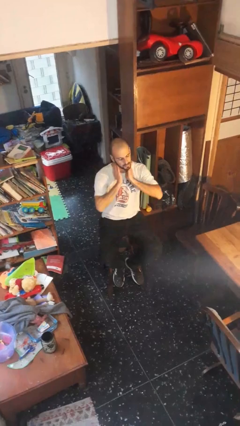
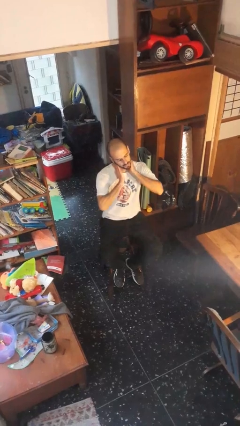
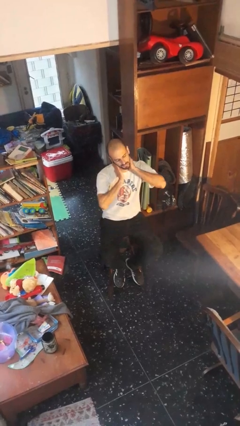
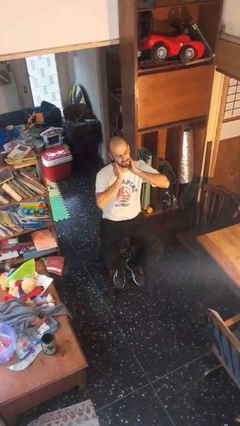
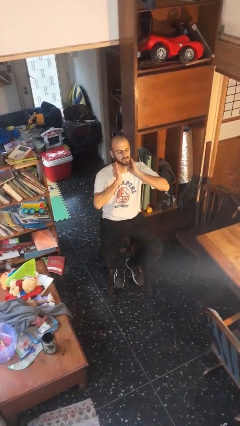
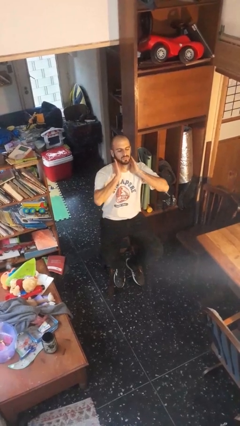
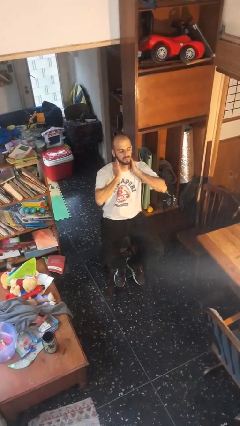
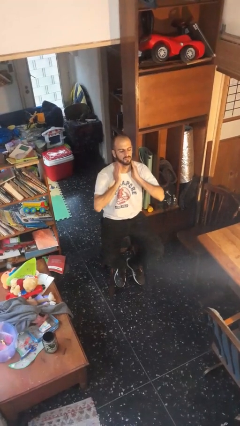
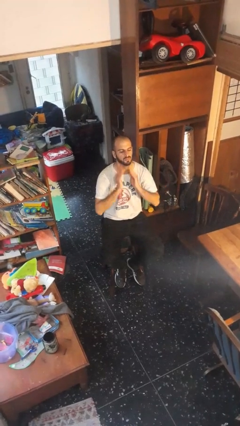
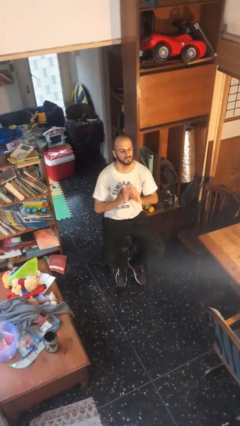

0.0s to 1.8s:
person rubs neck

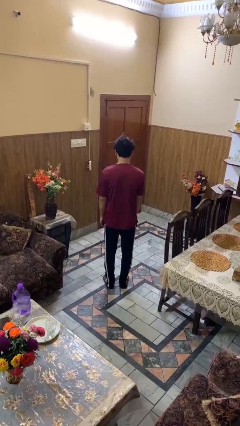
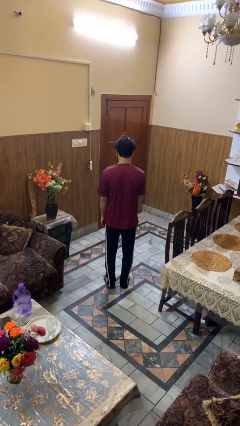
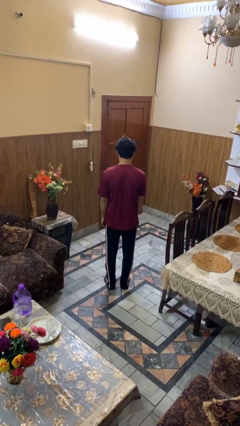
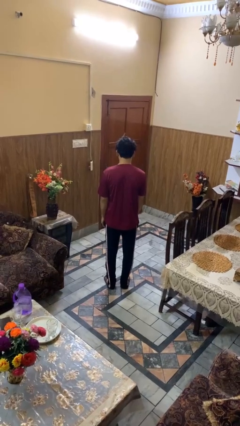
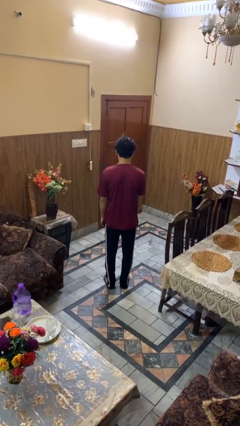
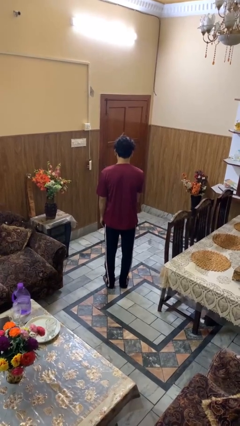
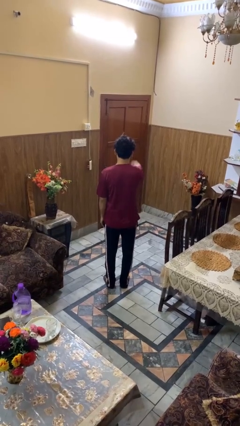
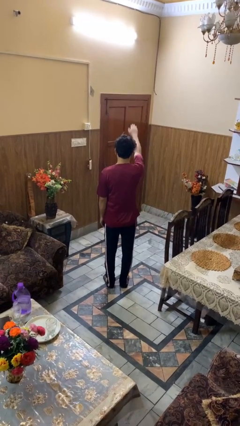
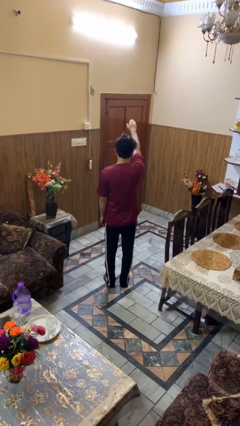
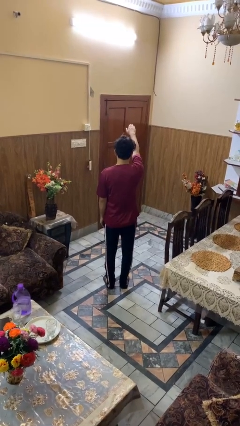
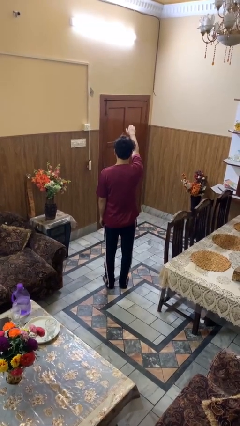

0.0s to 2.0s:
person gestures swipe up

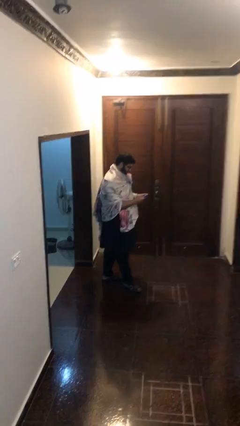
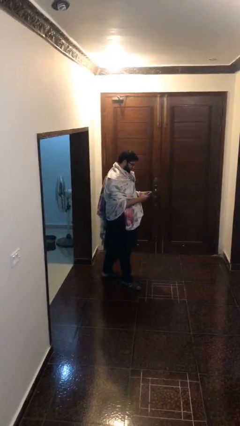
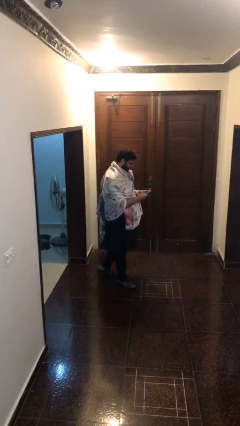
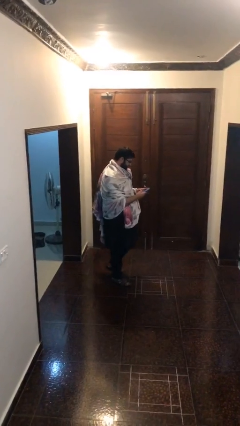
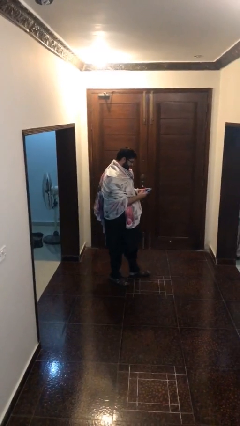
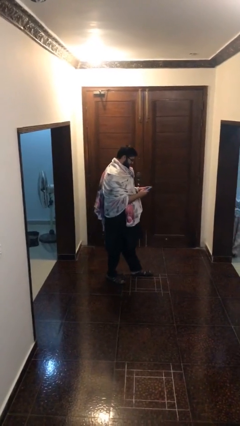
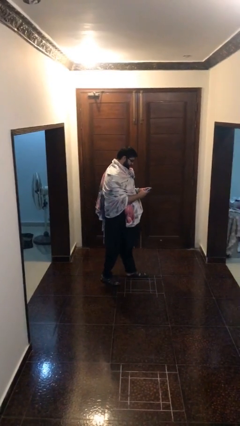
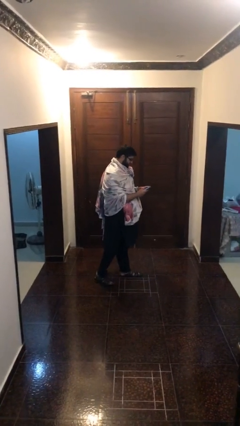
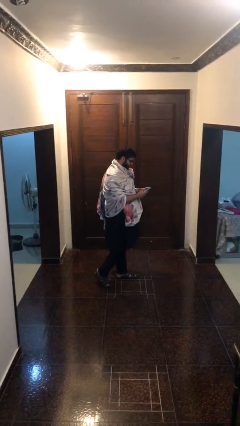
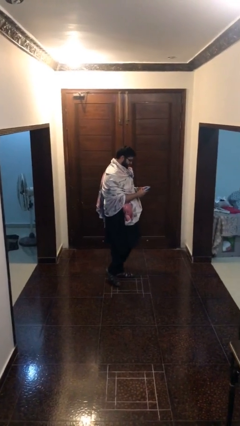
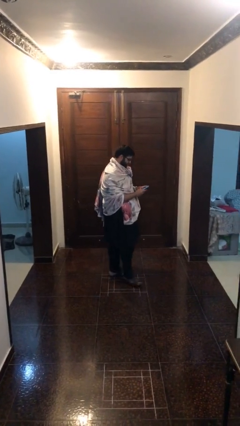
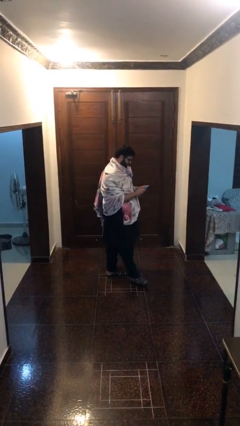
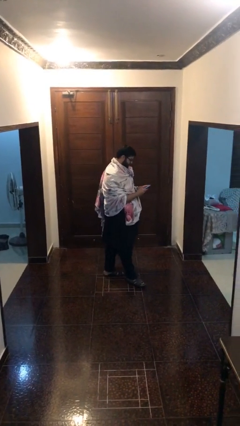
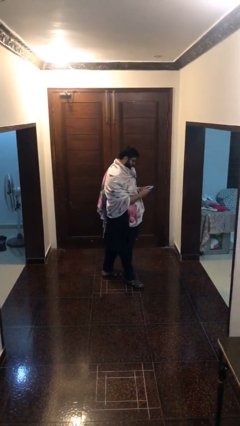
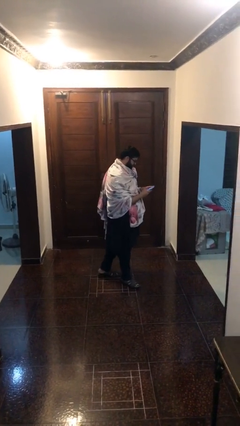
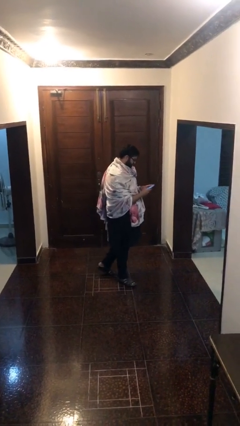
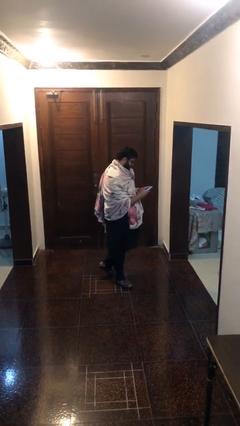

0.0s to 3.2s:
person texts on phone

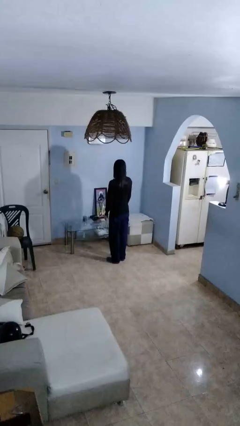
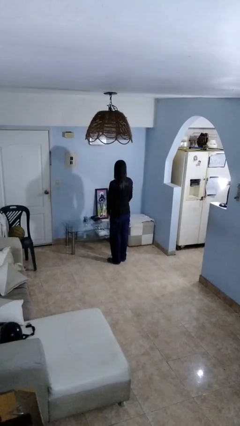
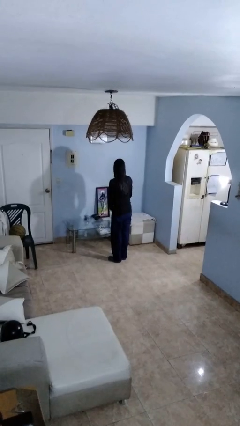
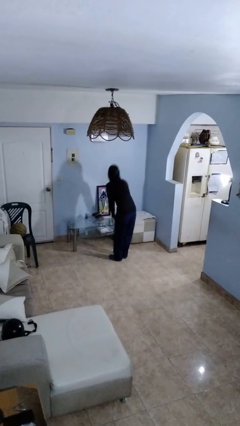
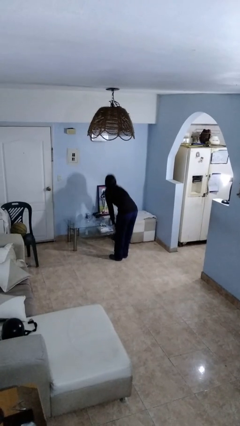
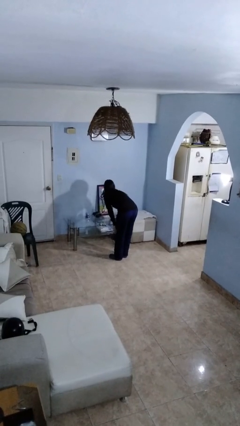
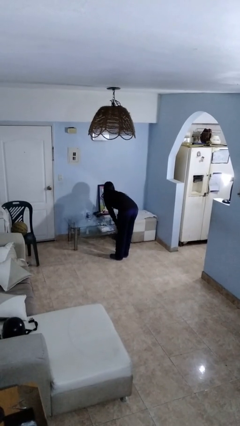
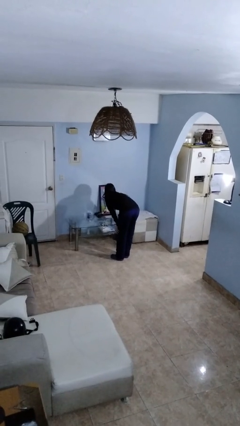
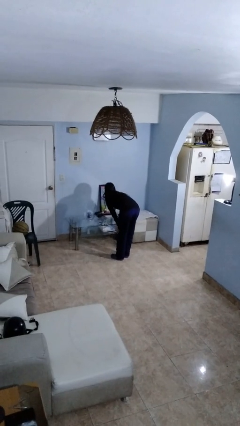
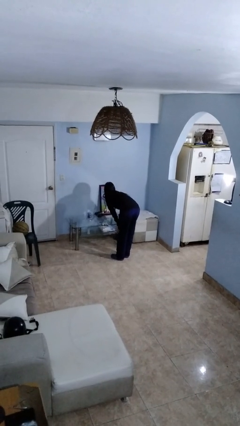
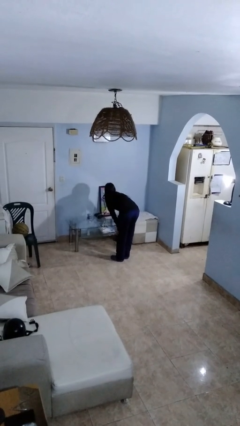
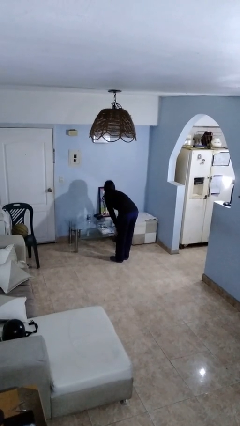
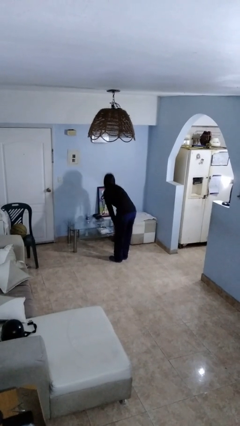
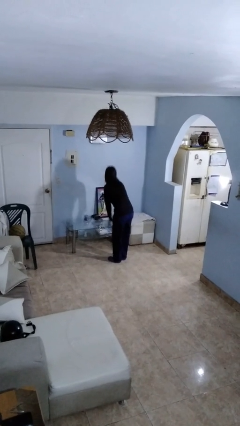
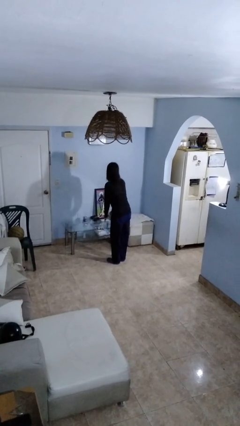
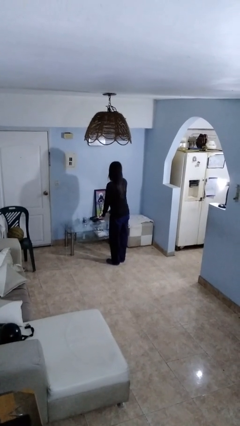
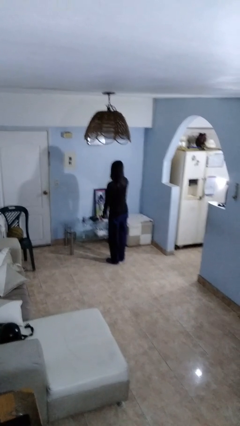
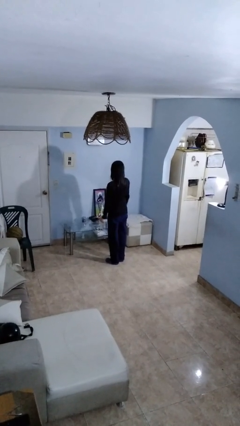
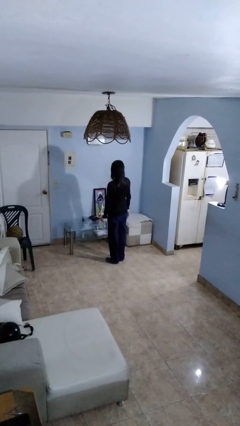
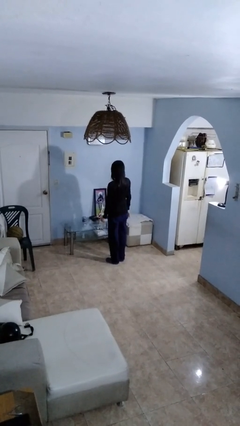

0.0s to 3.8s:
person cleans table with rag

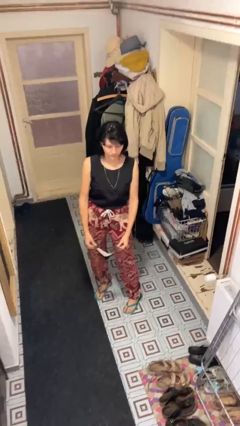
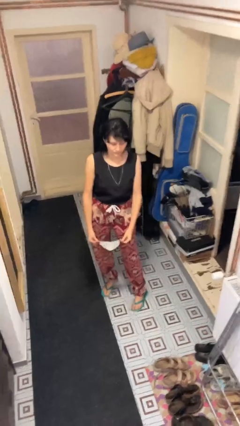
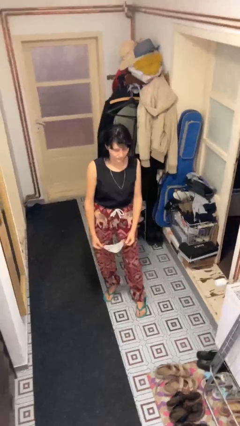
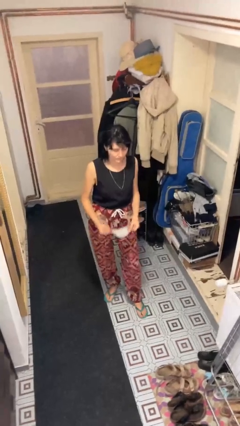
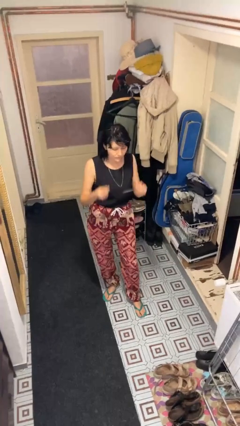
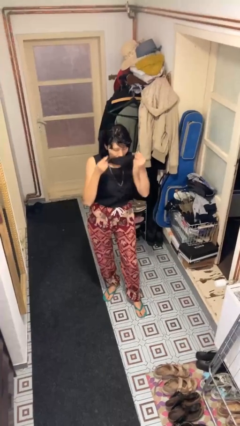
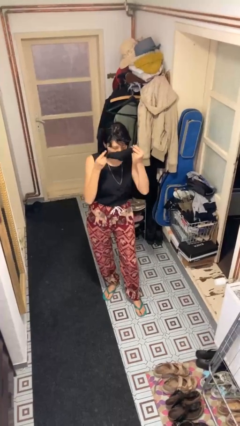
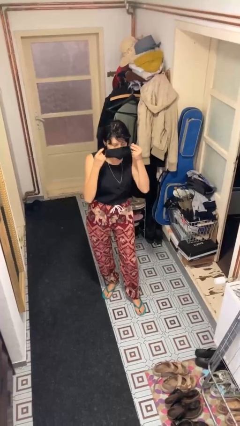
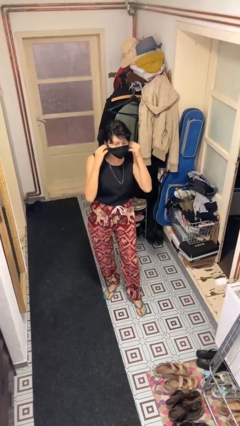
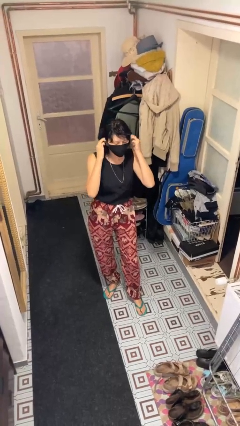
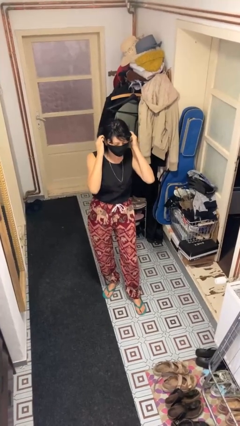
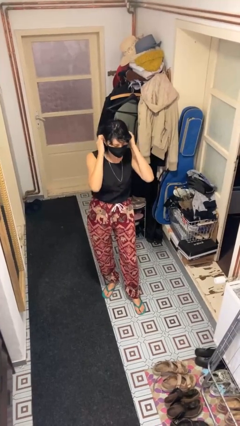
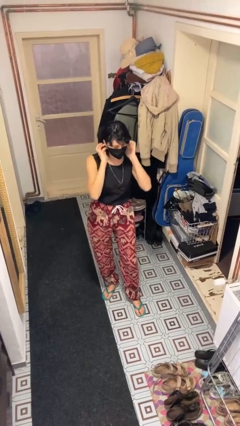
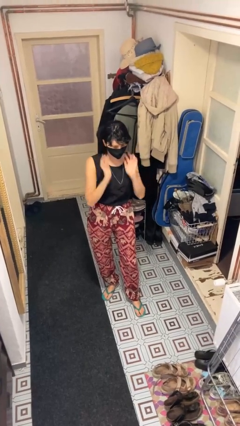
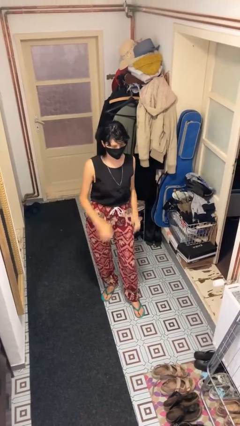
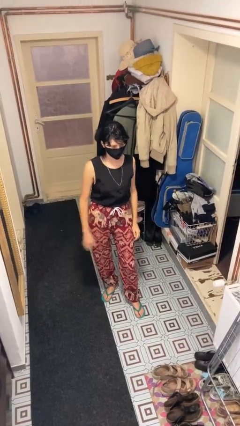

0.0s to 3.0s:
person puts on facemask

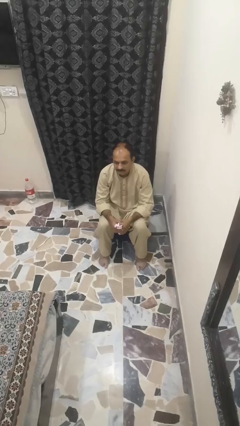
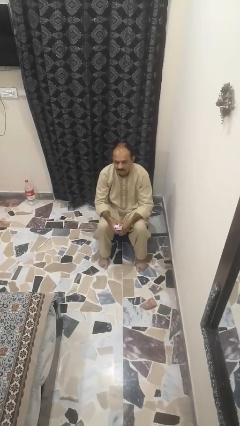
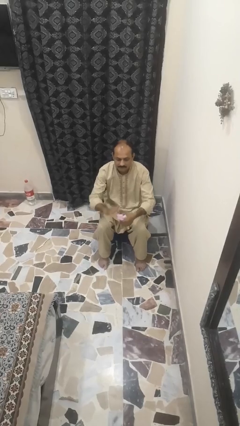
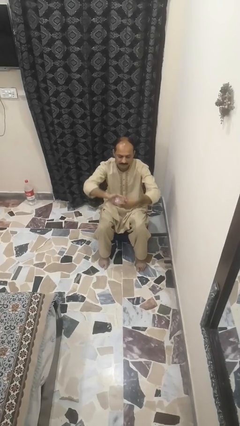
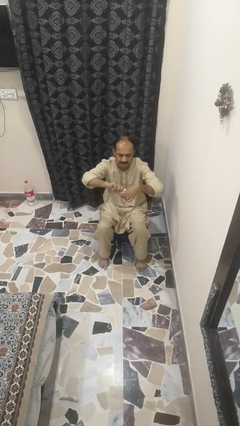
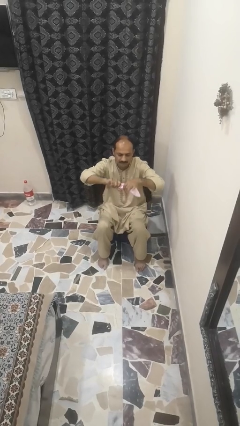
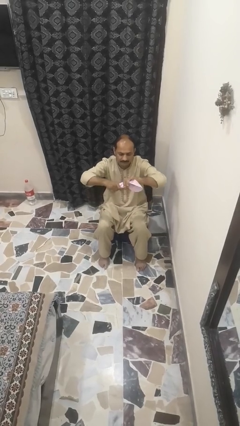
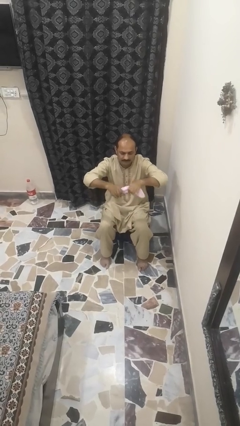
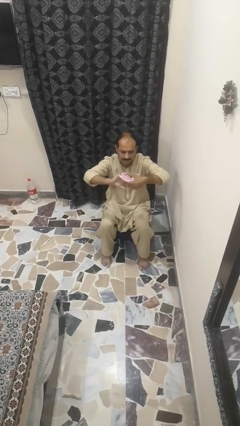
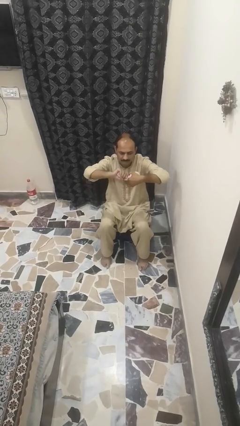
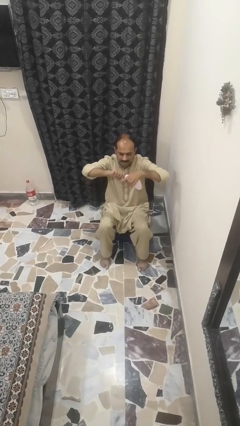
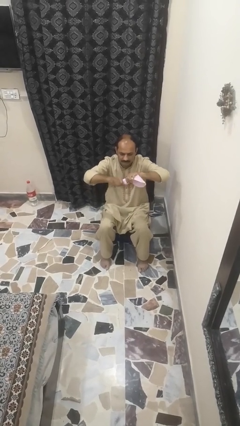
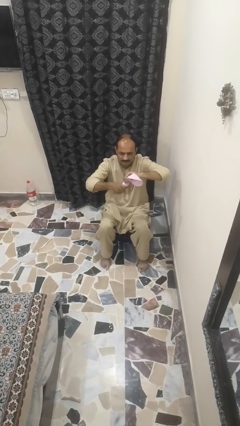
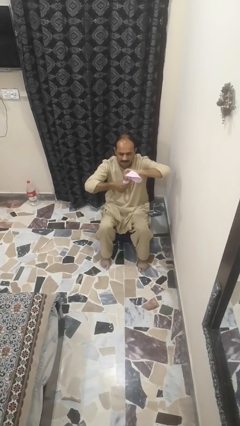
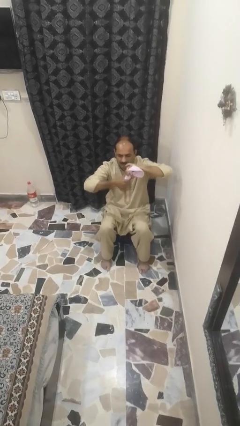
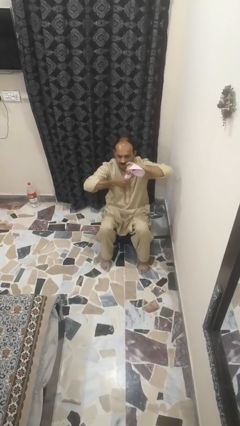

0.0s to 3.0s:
person squeezes object

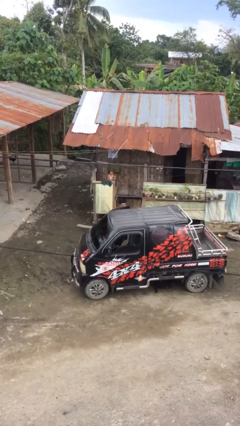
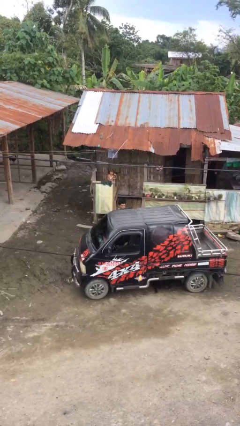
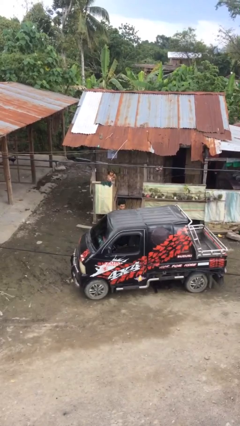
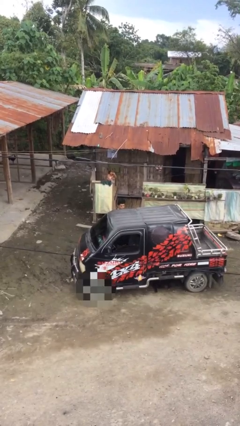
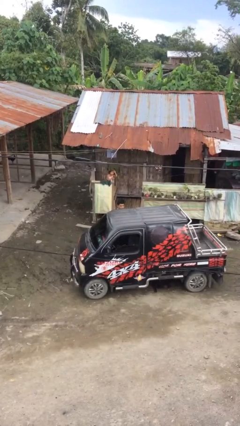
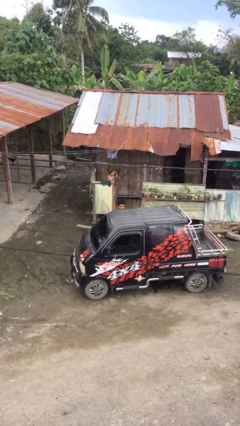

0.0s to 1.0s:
person closes car door
